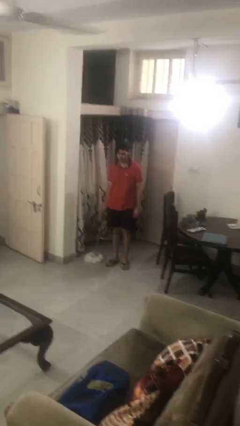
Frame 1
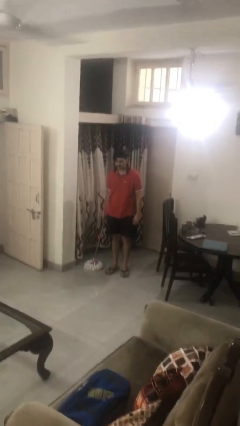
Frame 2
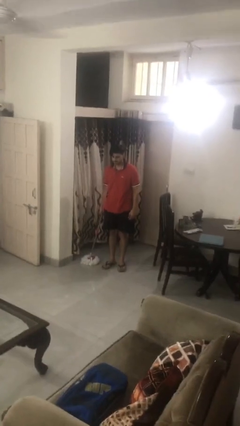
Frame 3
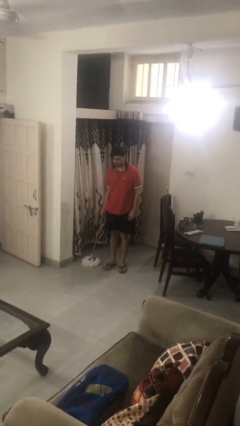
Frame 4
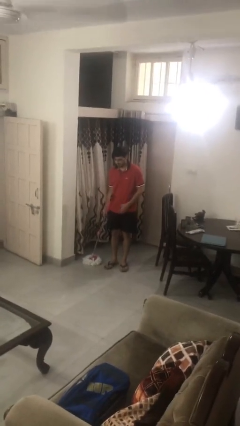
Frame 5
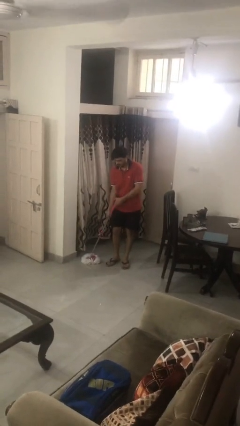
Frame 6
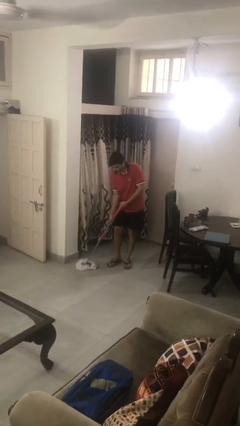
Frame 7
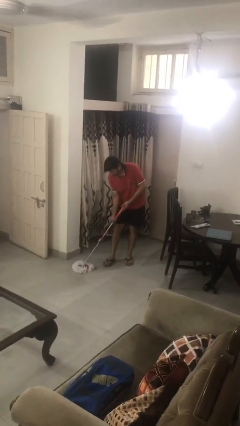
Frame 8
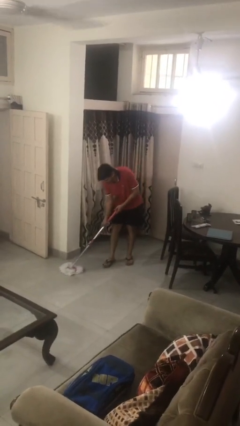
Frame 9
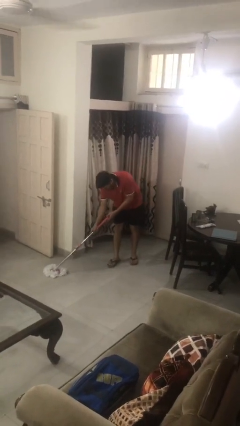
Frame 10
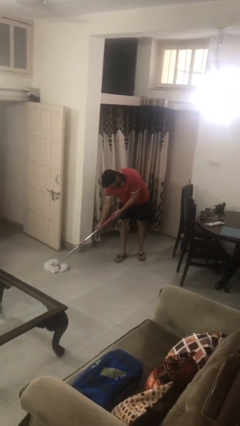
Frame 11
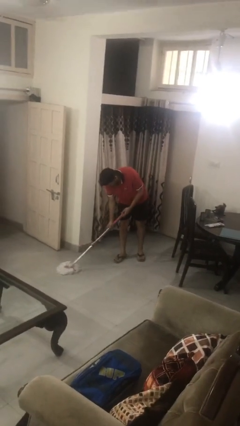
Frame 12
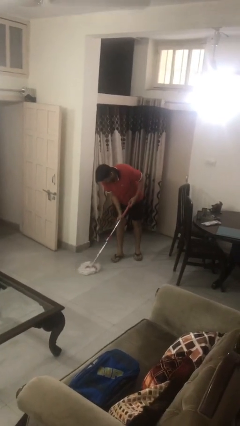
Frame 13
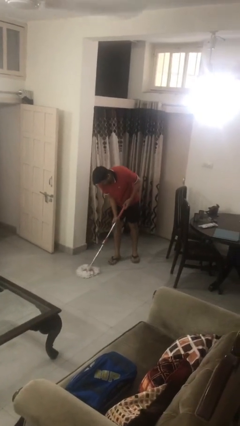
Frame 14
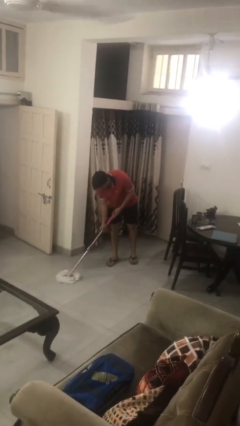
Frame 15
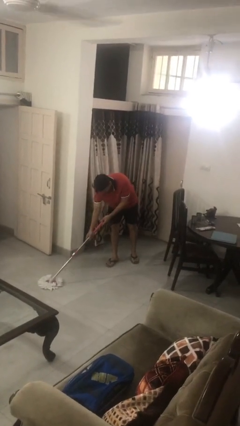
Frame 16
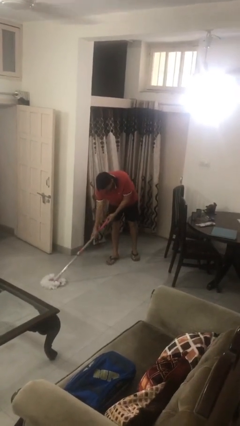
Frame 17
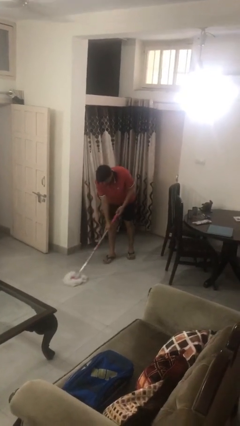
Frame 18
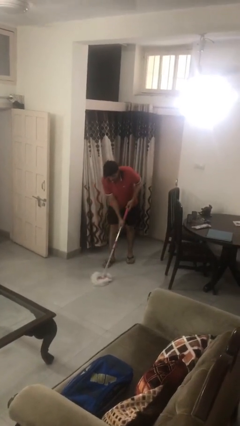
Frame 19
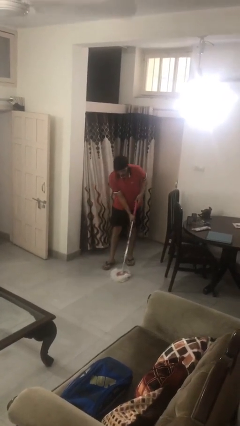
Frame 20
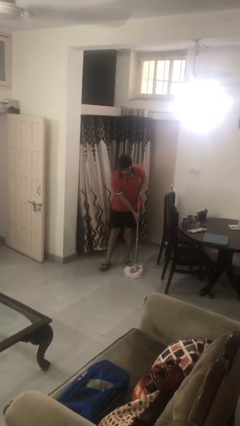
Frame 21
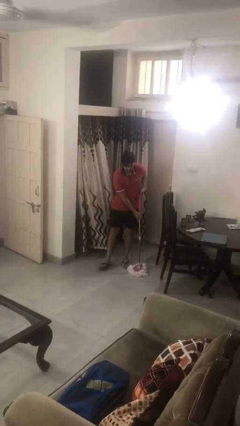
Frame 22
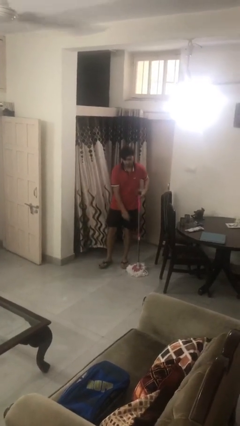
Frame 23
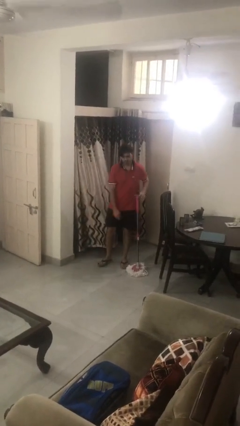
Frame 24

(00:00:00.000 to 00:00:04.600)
person mops

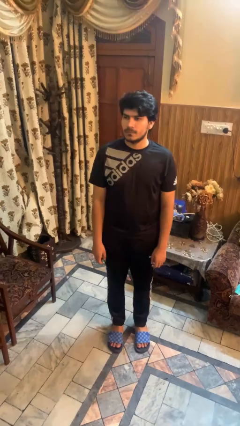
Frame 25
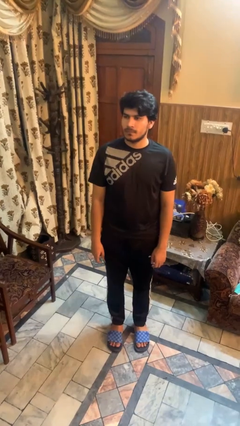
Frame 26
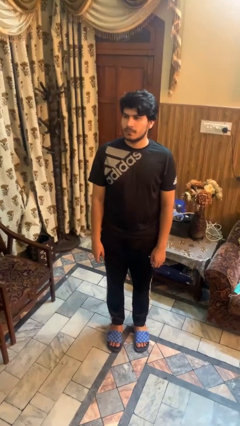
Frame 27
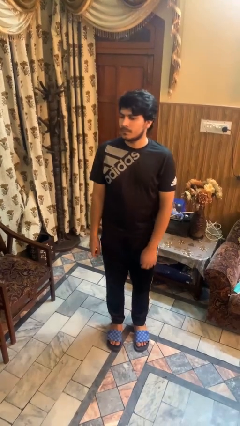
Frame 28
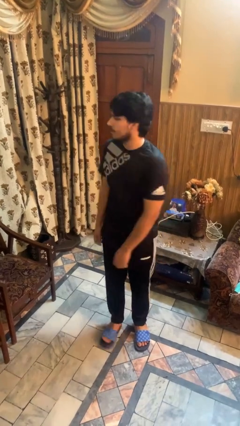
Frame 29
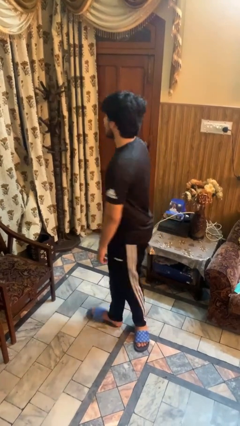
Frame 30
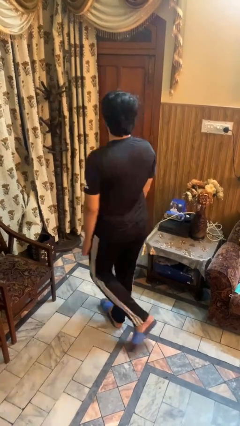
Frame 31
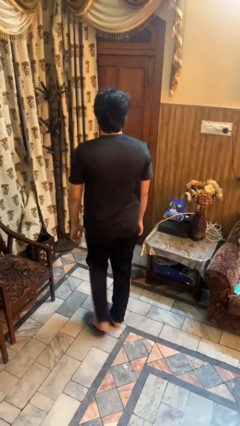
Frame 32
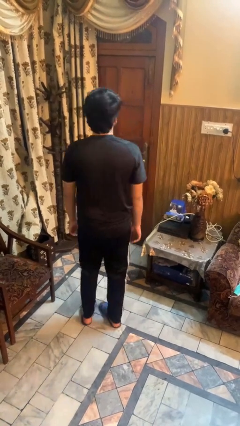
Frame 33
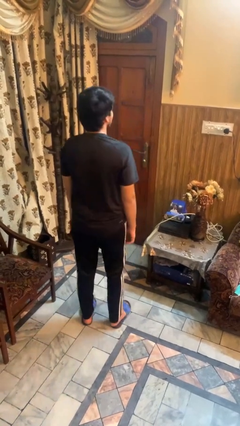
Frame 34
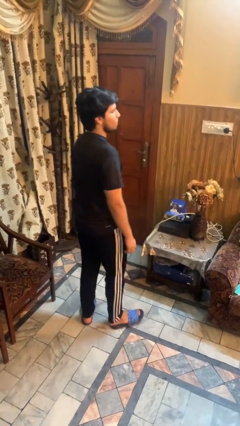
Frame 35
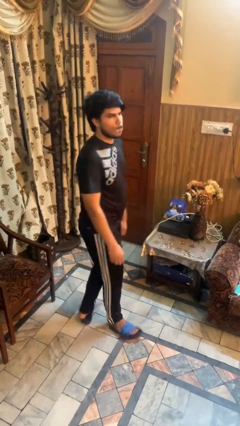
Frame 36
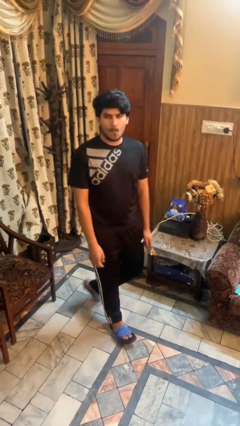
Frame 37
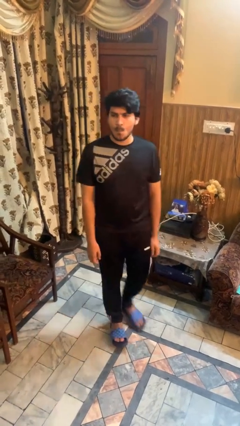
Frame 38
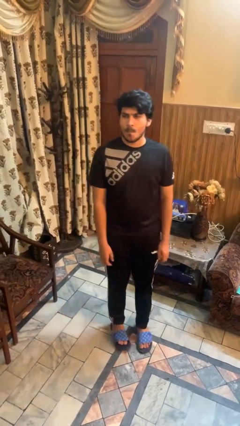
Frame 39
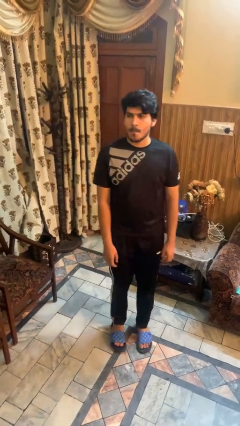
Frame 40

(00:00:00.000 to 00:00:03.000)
person twirls

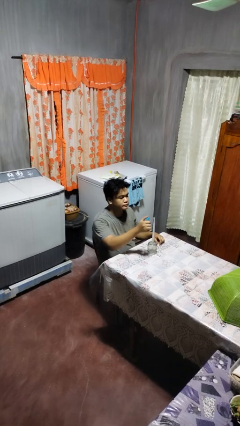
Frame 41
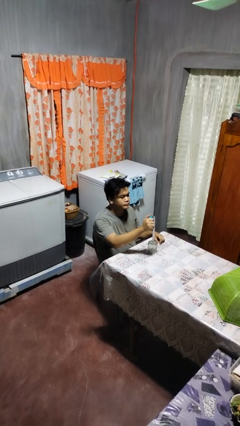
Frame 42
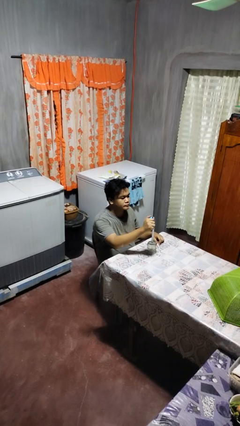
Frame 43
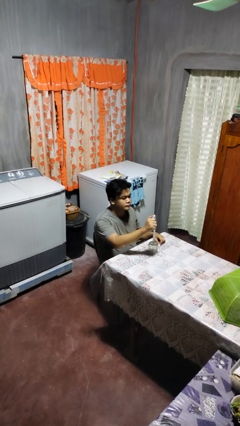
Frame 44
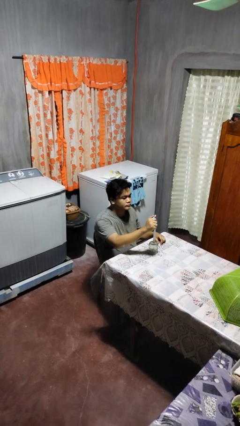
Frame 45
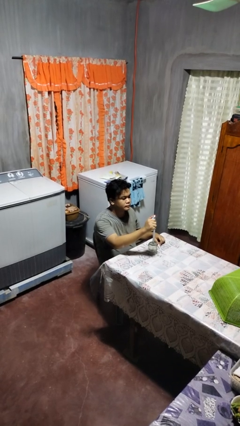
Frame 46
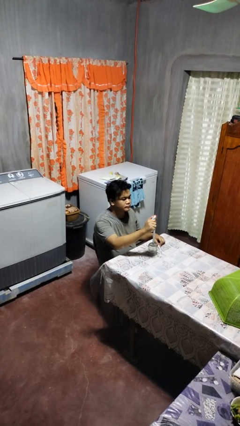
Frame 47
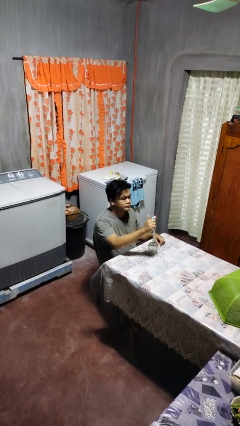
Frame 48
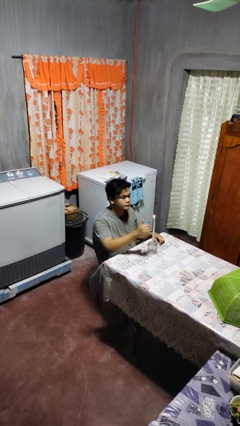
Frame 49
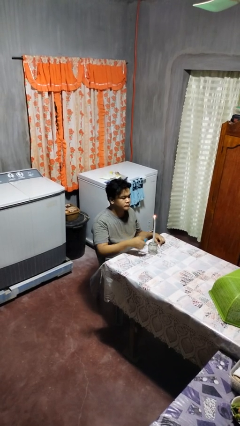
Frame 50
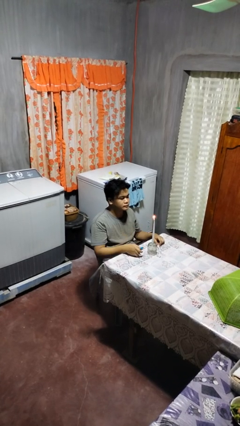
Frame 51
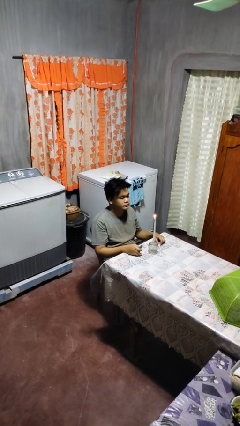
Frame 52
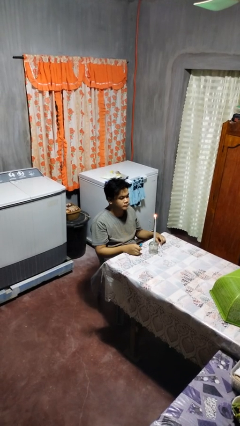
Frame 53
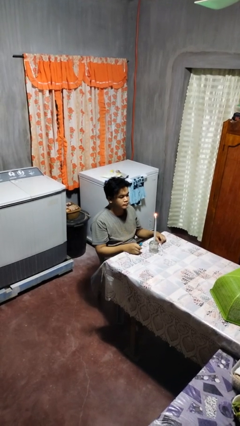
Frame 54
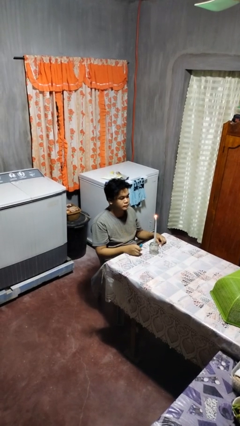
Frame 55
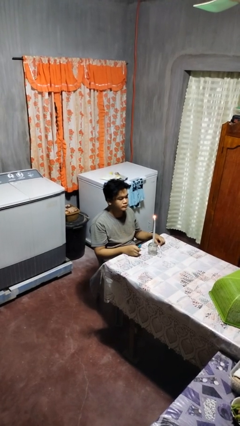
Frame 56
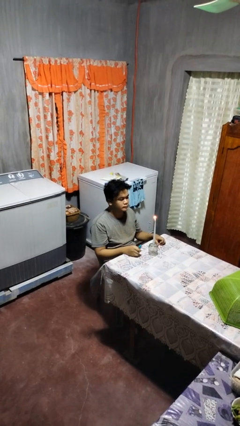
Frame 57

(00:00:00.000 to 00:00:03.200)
person lights candle

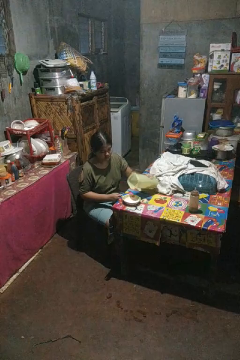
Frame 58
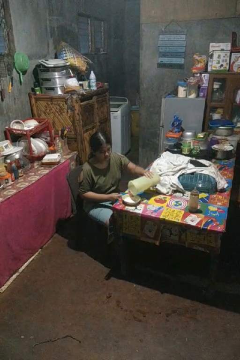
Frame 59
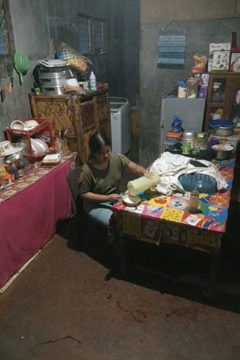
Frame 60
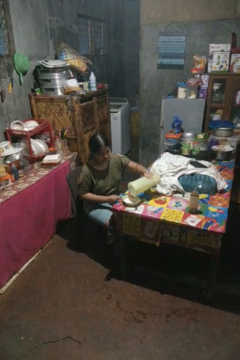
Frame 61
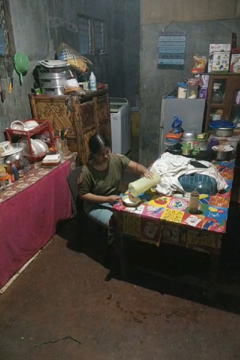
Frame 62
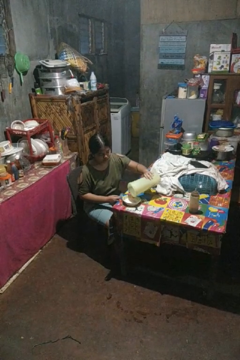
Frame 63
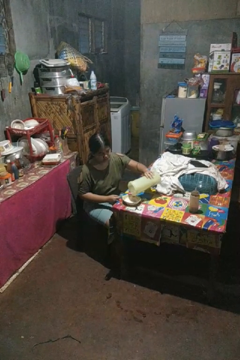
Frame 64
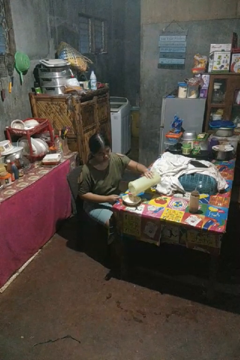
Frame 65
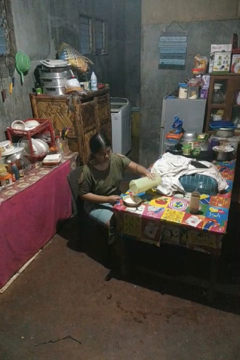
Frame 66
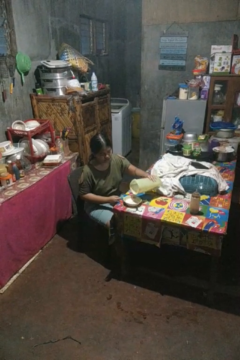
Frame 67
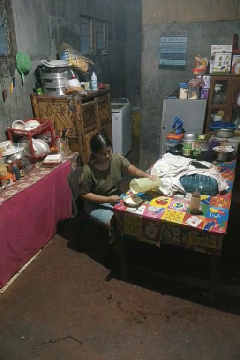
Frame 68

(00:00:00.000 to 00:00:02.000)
person pours into bowl

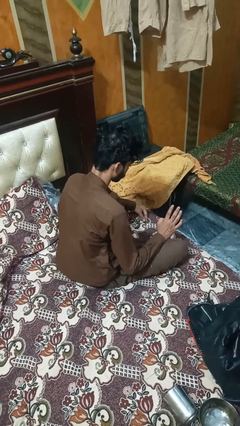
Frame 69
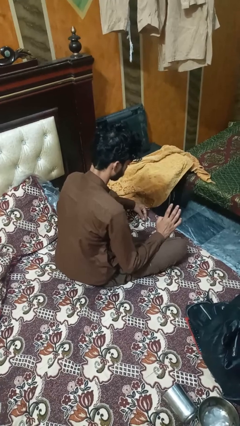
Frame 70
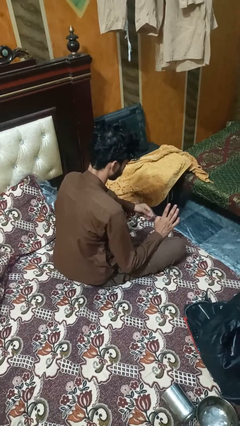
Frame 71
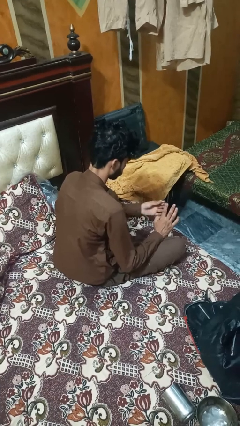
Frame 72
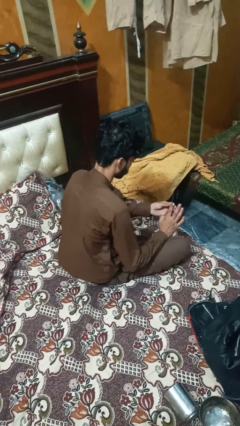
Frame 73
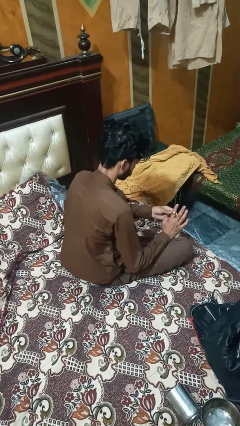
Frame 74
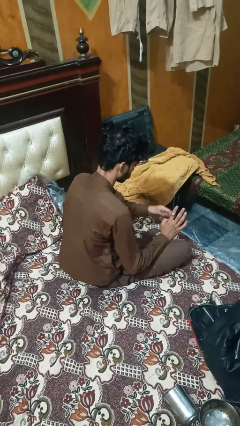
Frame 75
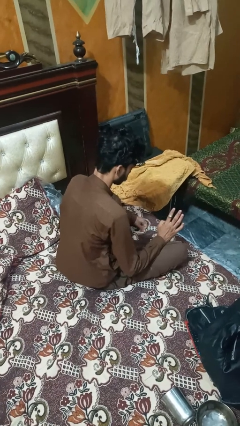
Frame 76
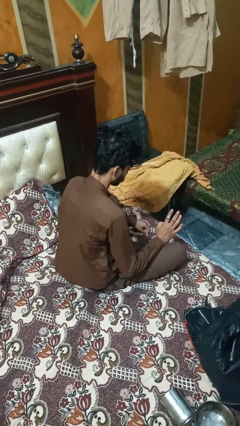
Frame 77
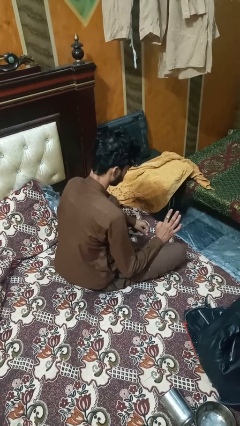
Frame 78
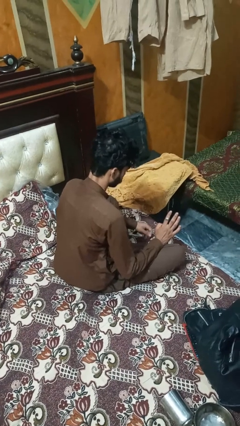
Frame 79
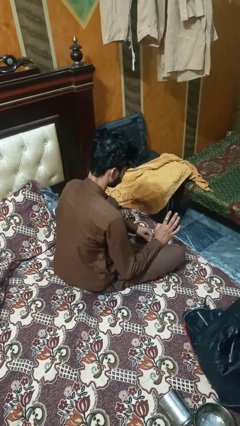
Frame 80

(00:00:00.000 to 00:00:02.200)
person puts on ring

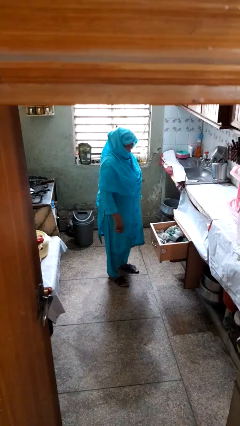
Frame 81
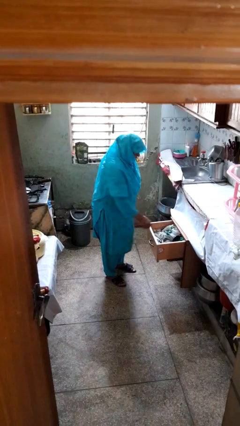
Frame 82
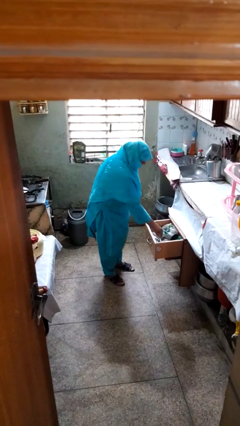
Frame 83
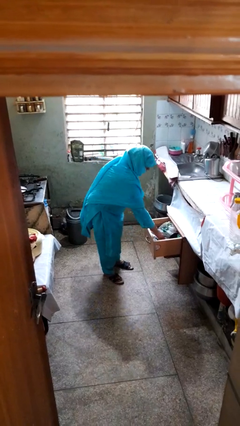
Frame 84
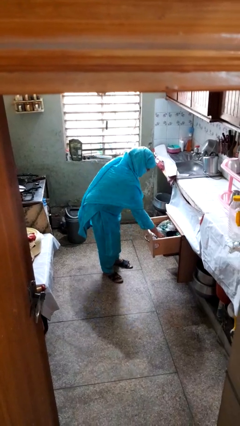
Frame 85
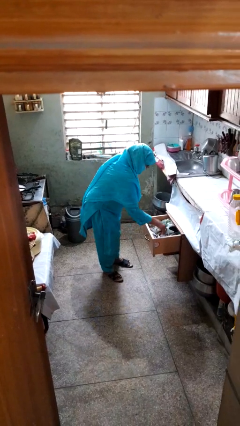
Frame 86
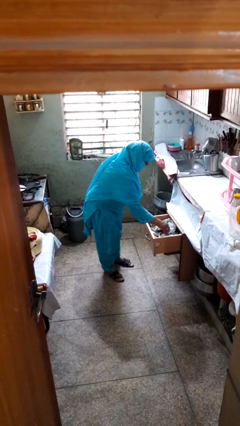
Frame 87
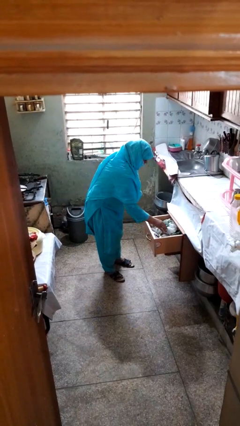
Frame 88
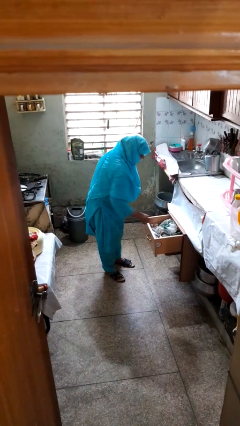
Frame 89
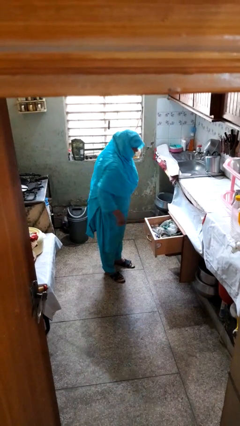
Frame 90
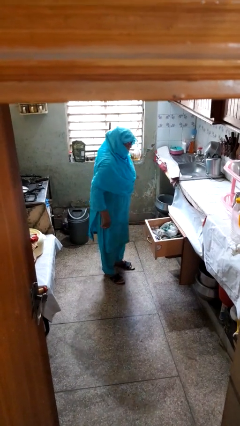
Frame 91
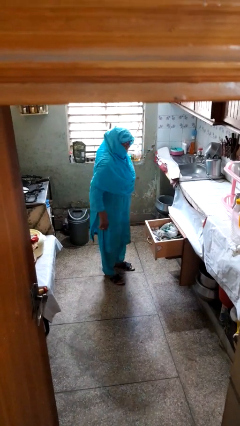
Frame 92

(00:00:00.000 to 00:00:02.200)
person searches in kitchen drawer

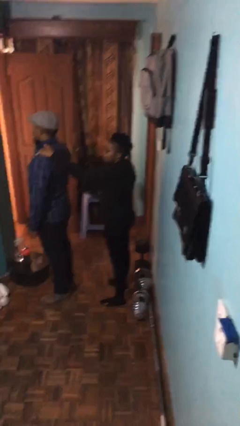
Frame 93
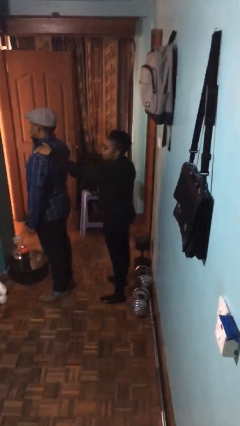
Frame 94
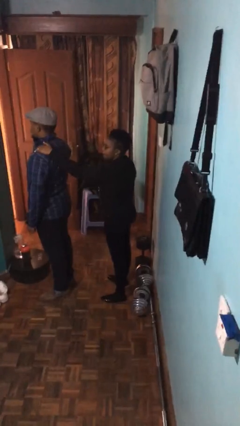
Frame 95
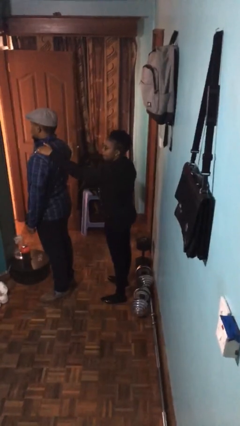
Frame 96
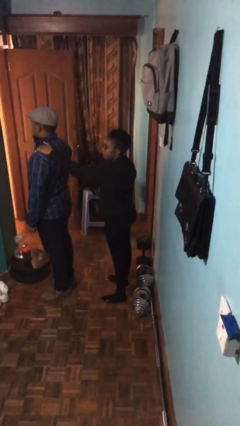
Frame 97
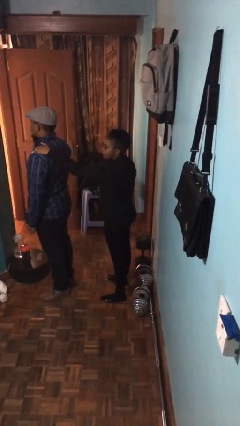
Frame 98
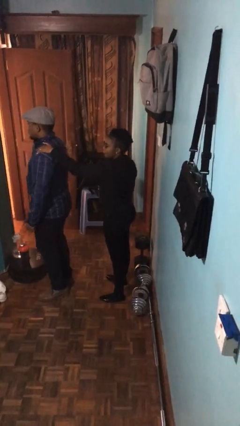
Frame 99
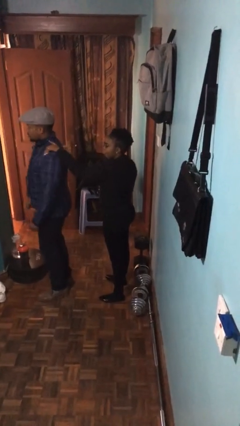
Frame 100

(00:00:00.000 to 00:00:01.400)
person grabs person by shoulder
